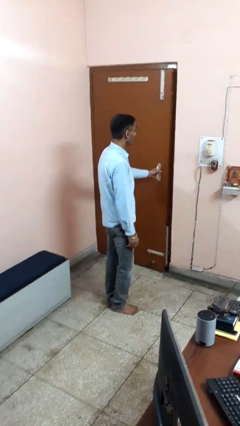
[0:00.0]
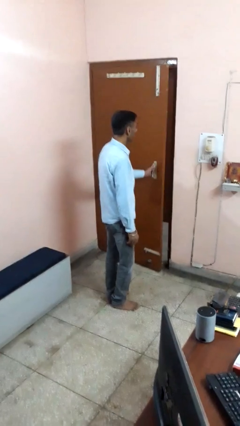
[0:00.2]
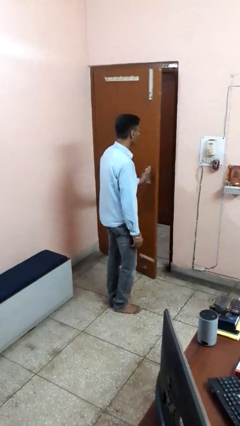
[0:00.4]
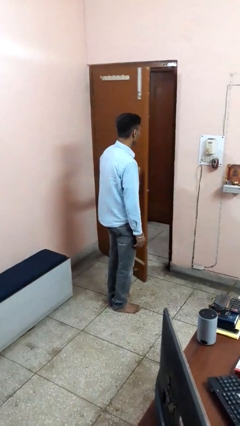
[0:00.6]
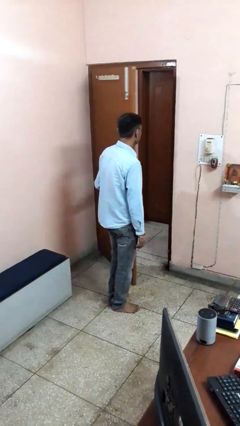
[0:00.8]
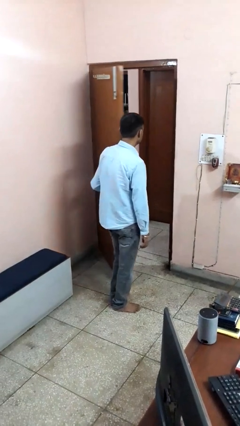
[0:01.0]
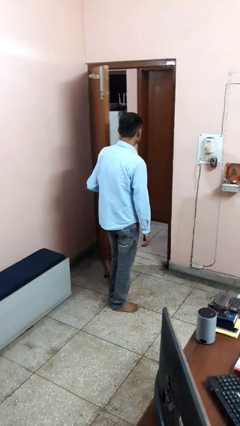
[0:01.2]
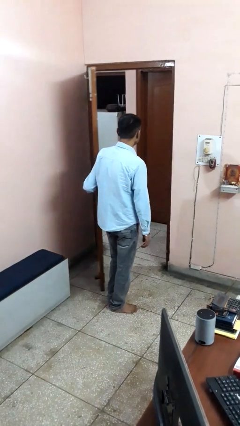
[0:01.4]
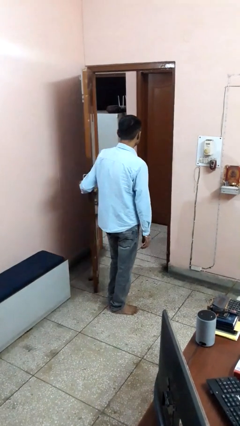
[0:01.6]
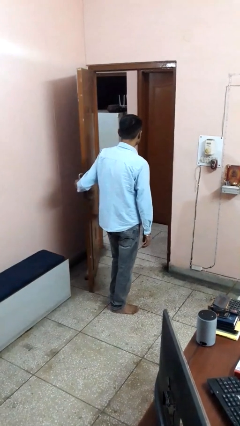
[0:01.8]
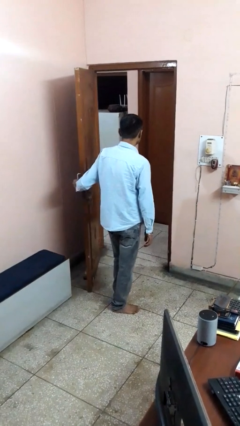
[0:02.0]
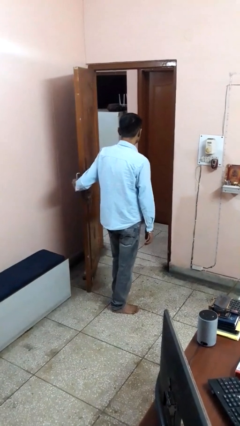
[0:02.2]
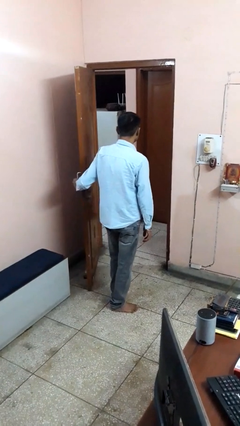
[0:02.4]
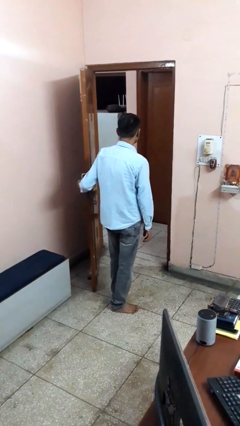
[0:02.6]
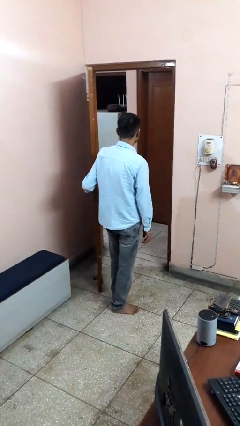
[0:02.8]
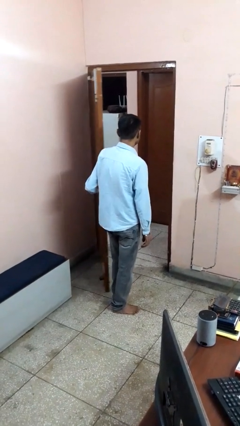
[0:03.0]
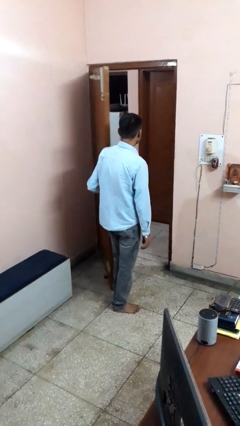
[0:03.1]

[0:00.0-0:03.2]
person opens facility door

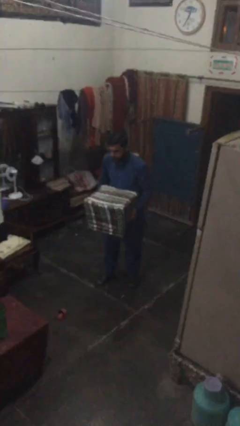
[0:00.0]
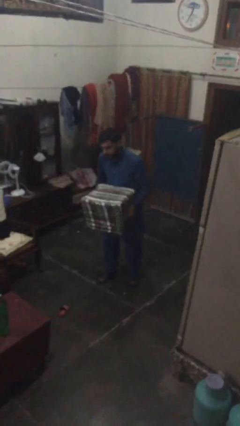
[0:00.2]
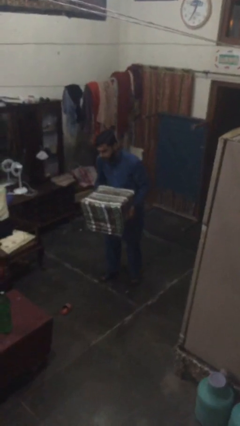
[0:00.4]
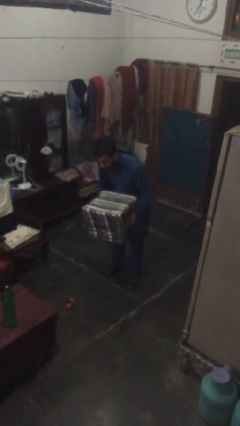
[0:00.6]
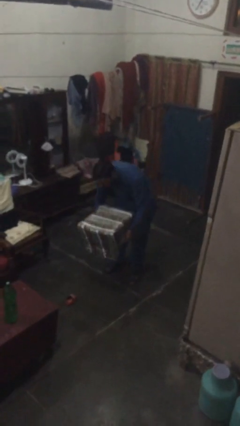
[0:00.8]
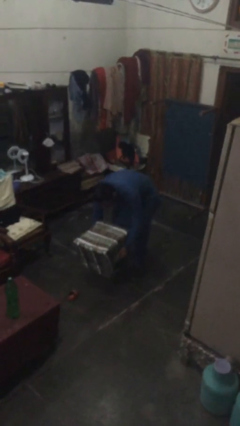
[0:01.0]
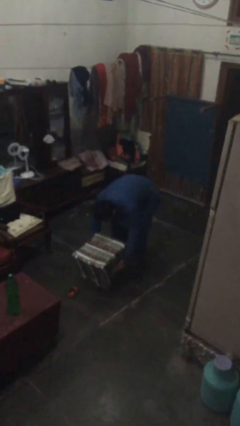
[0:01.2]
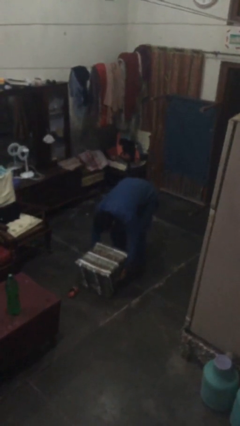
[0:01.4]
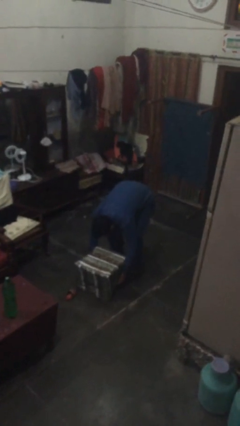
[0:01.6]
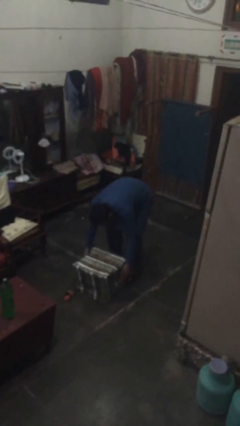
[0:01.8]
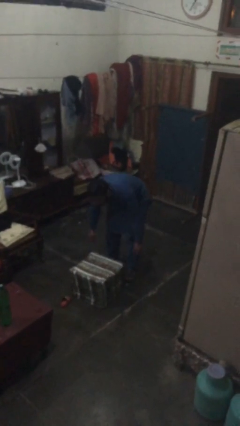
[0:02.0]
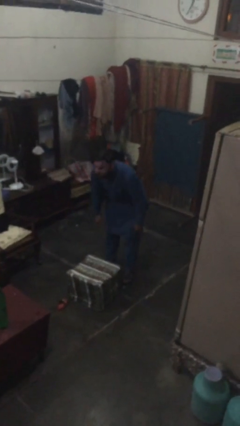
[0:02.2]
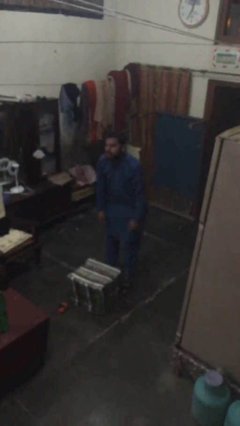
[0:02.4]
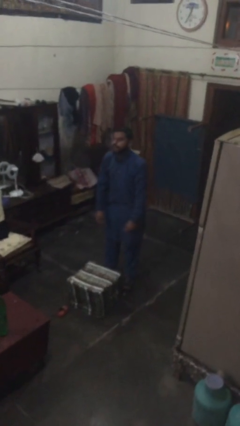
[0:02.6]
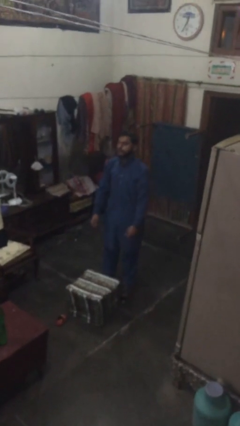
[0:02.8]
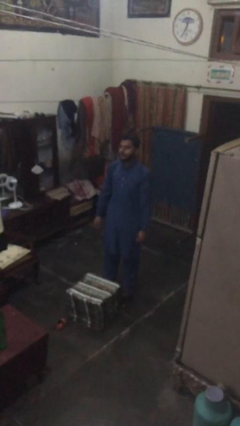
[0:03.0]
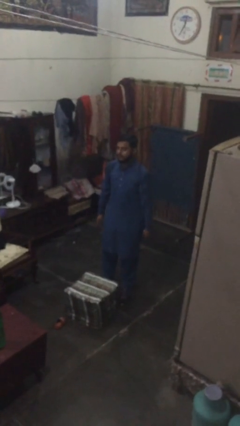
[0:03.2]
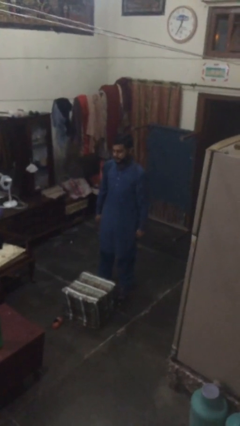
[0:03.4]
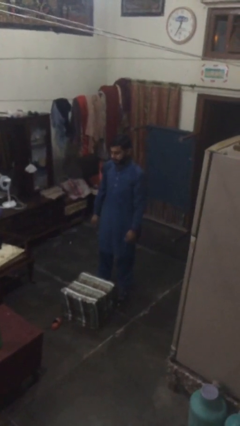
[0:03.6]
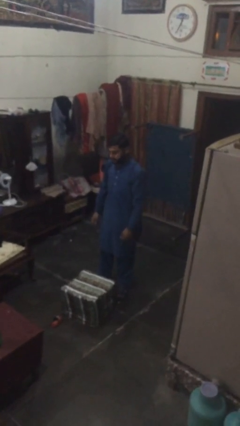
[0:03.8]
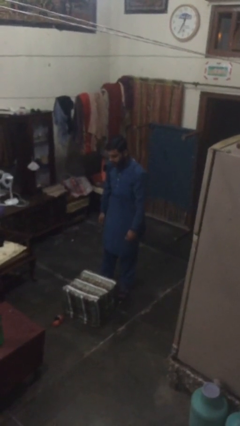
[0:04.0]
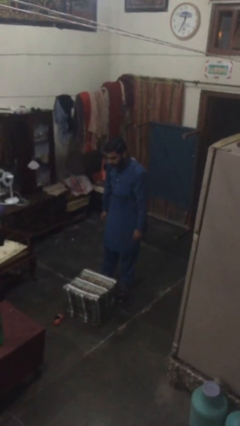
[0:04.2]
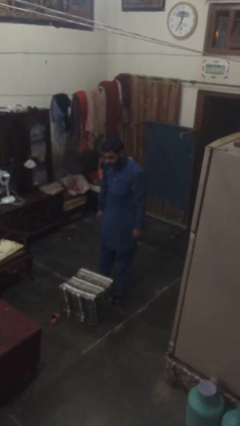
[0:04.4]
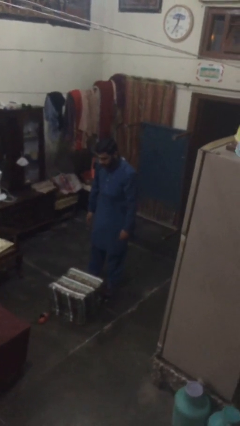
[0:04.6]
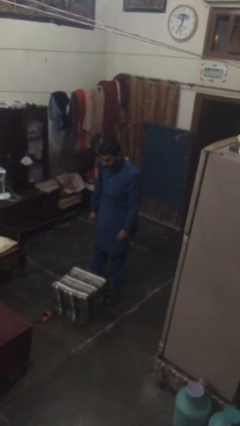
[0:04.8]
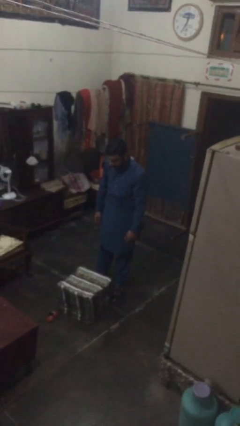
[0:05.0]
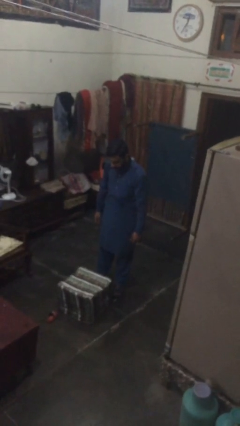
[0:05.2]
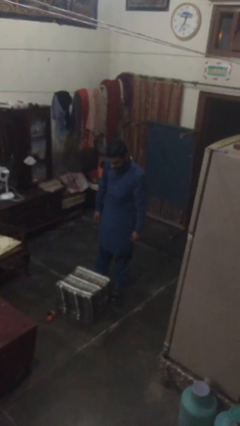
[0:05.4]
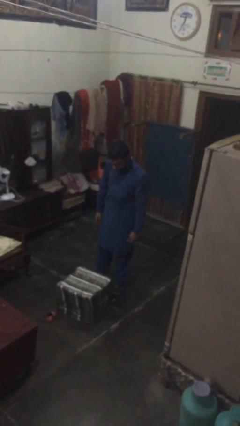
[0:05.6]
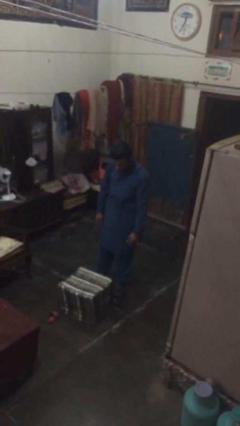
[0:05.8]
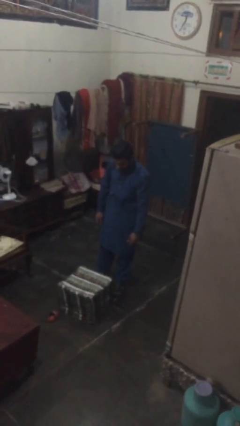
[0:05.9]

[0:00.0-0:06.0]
person puts down object on floor

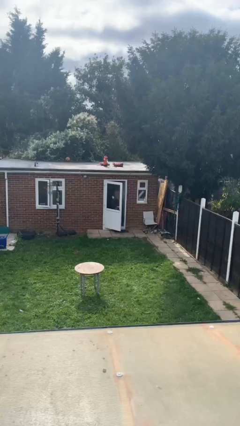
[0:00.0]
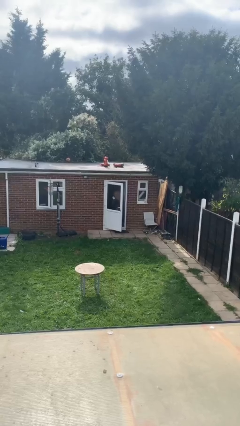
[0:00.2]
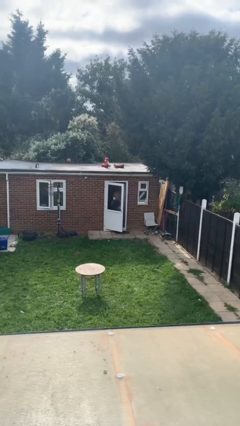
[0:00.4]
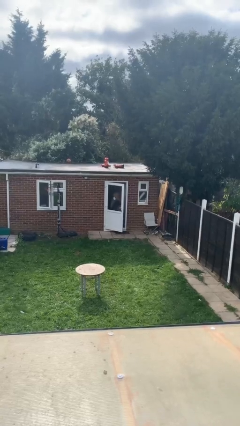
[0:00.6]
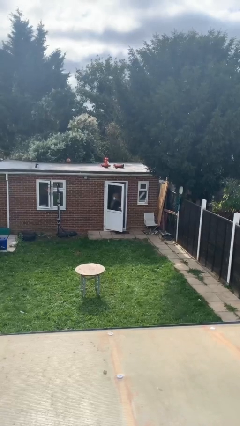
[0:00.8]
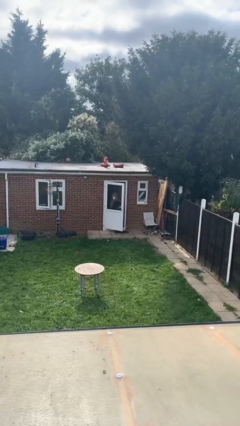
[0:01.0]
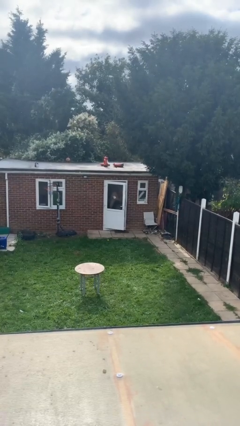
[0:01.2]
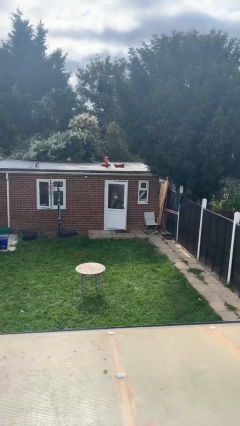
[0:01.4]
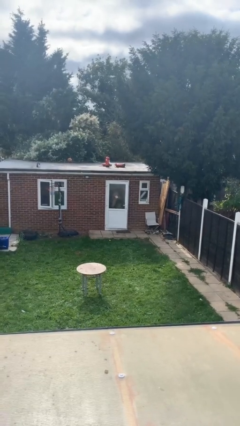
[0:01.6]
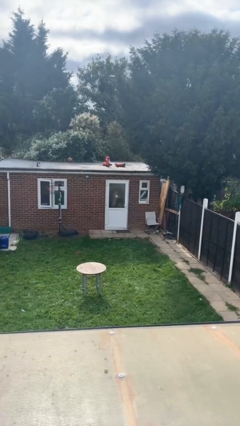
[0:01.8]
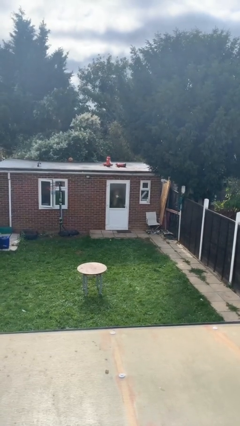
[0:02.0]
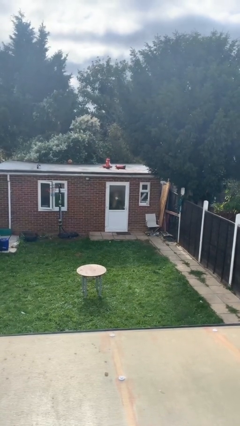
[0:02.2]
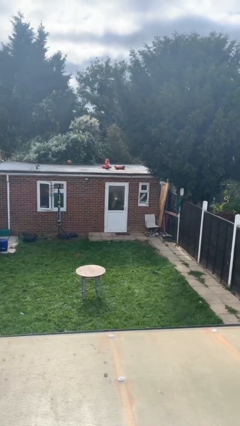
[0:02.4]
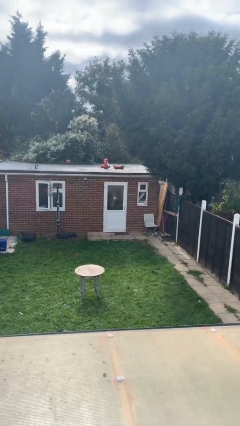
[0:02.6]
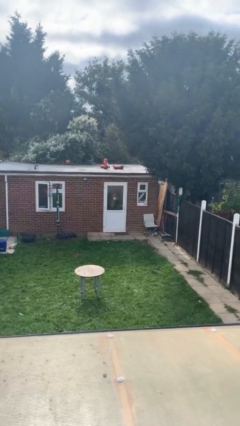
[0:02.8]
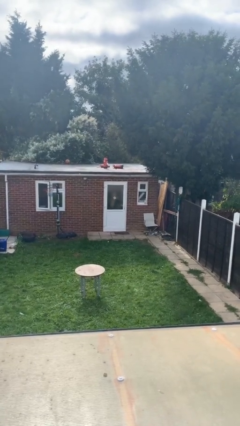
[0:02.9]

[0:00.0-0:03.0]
person closes facility door

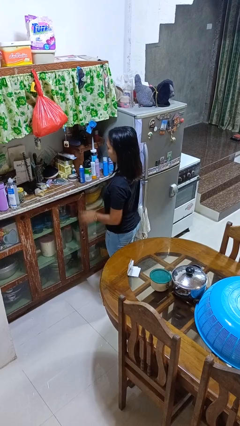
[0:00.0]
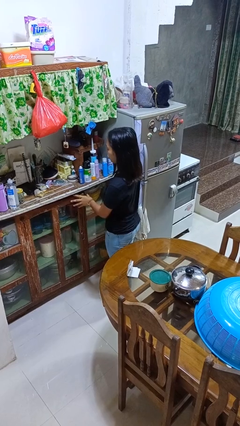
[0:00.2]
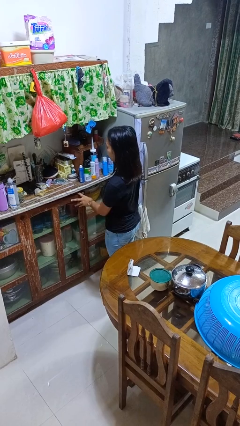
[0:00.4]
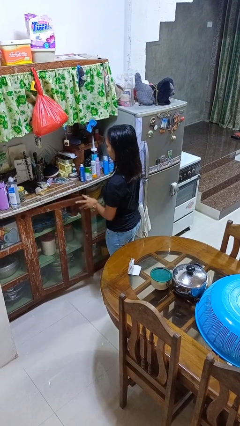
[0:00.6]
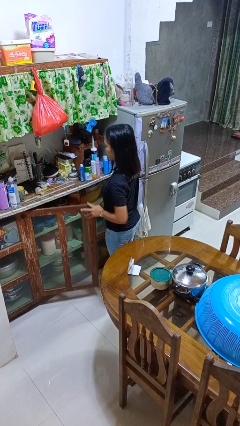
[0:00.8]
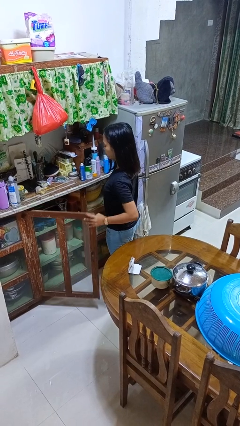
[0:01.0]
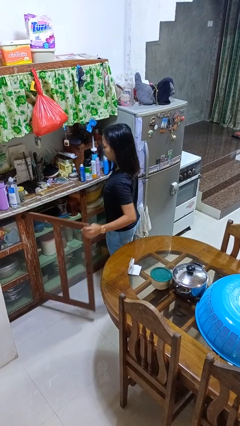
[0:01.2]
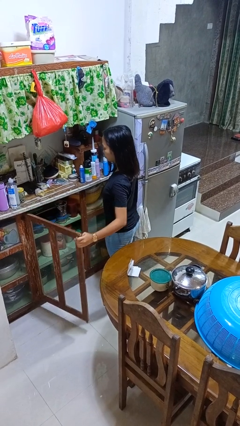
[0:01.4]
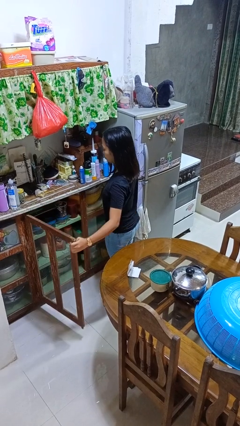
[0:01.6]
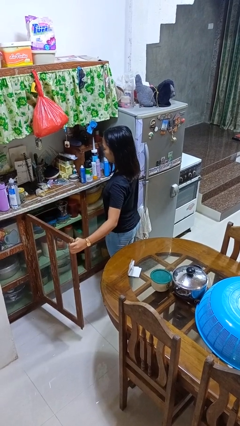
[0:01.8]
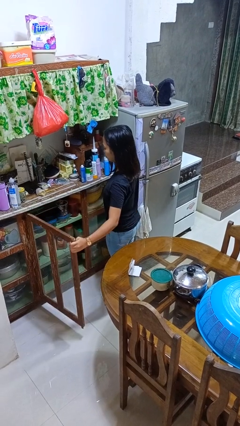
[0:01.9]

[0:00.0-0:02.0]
person opens cabinet

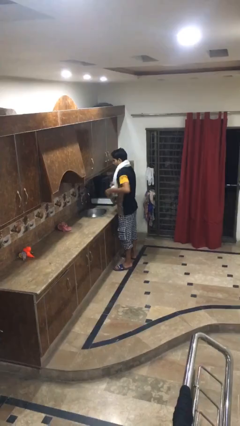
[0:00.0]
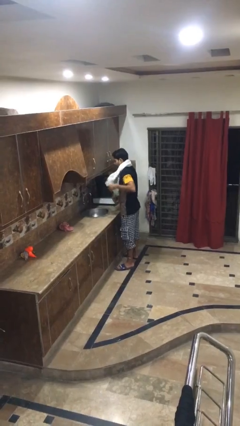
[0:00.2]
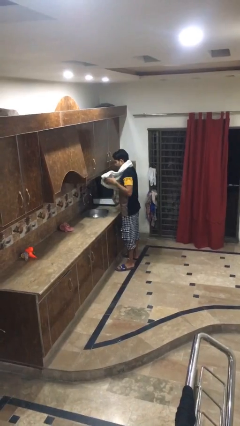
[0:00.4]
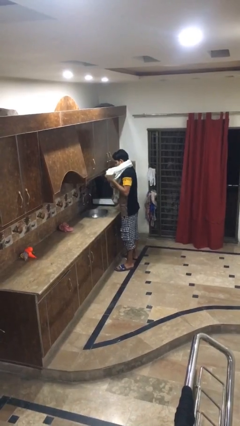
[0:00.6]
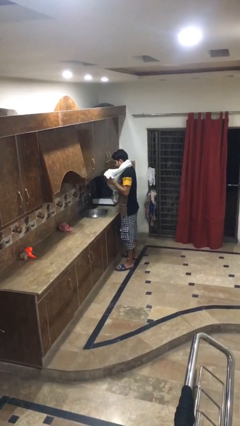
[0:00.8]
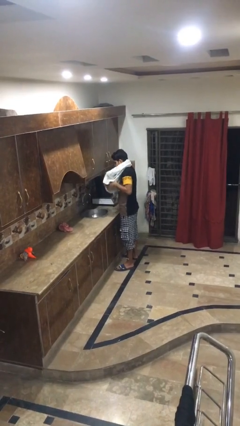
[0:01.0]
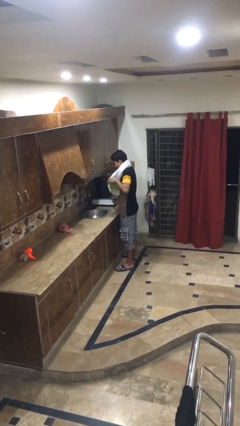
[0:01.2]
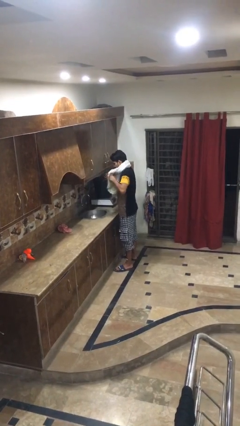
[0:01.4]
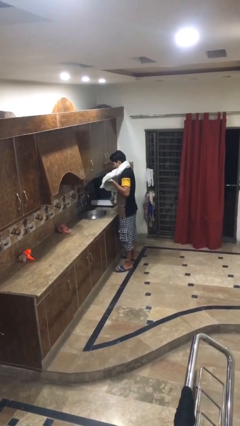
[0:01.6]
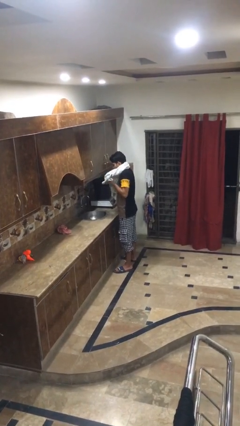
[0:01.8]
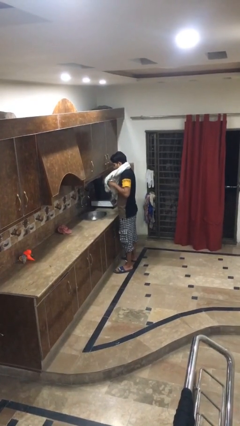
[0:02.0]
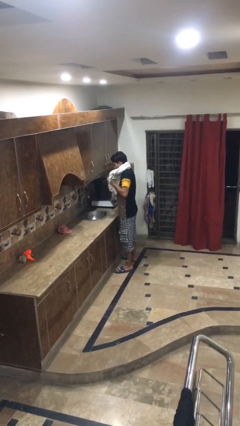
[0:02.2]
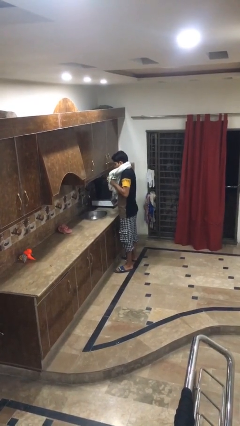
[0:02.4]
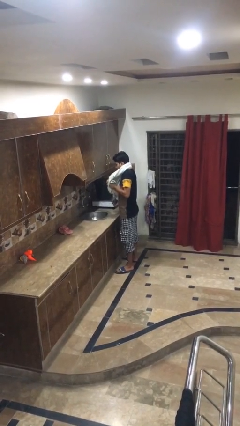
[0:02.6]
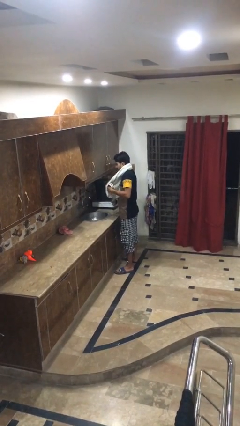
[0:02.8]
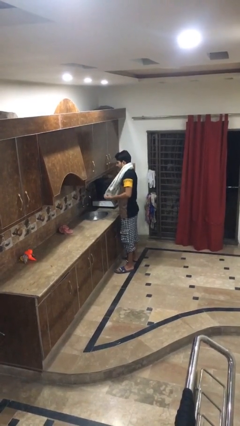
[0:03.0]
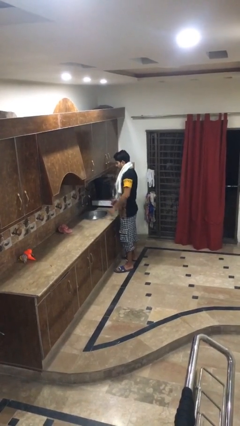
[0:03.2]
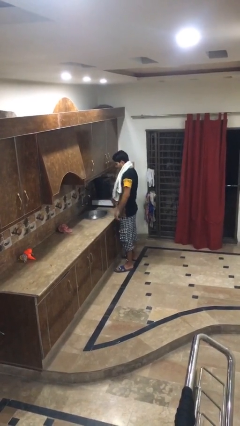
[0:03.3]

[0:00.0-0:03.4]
person dries hands with towel
